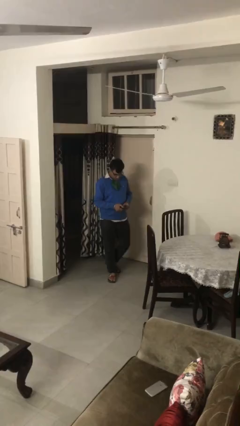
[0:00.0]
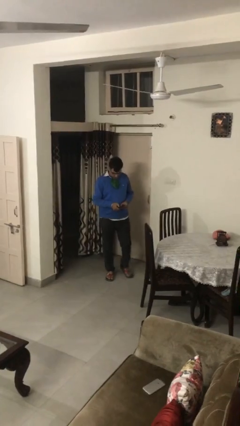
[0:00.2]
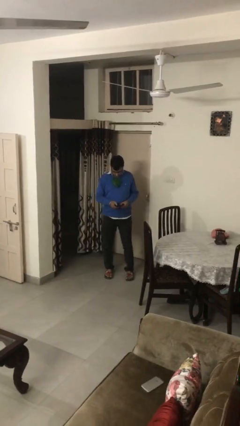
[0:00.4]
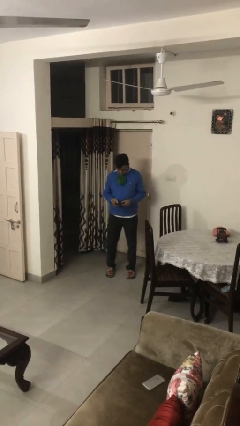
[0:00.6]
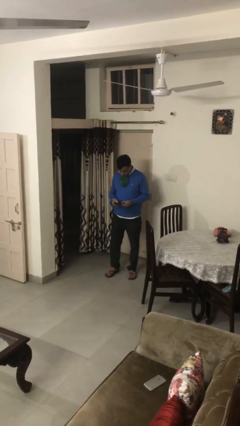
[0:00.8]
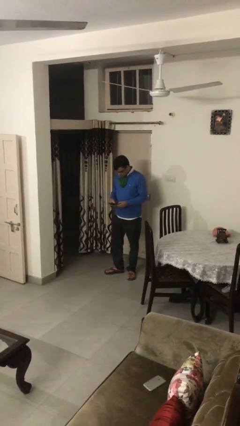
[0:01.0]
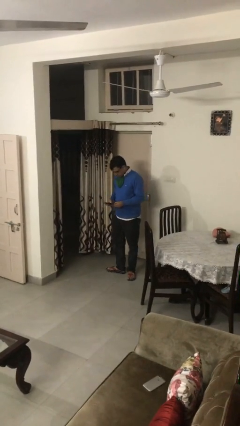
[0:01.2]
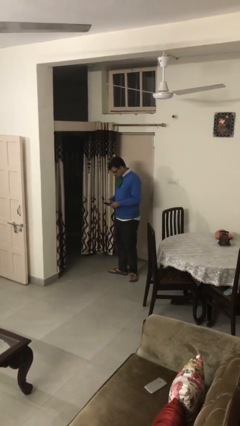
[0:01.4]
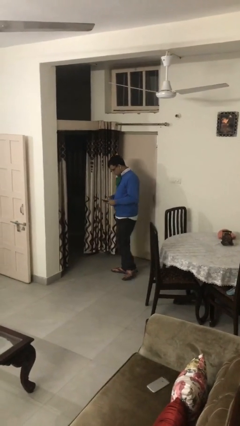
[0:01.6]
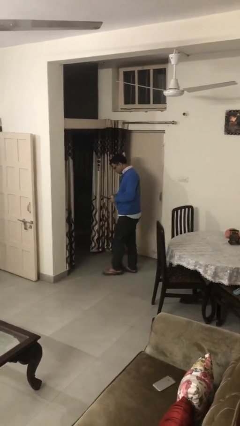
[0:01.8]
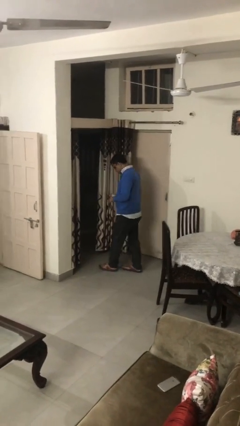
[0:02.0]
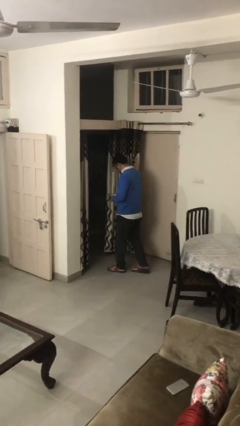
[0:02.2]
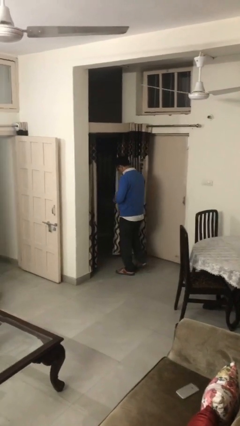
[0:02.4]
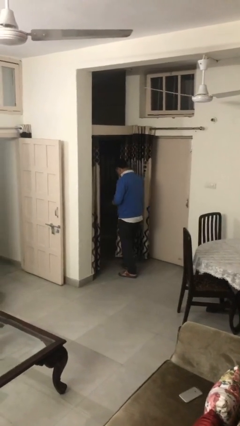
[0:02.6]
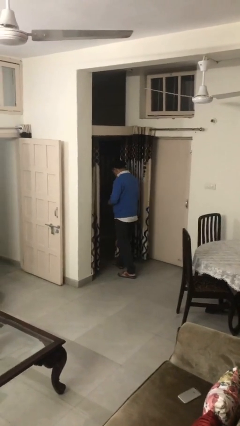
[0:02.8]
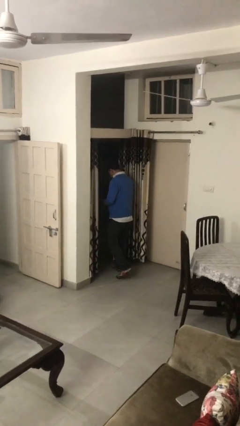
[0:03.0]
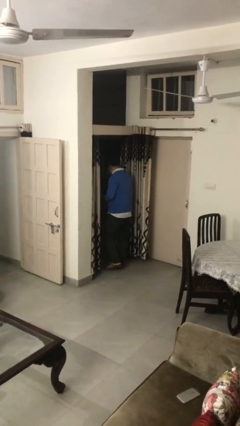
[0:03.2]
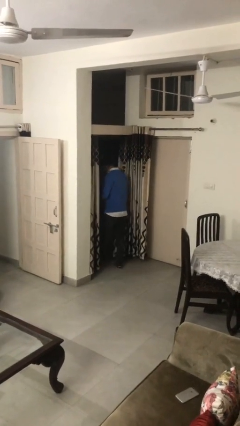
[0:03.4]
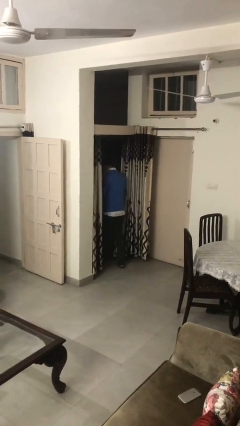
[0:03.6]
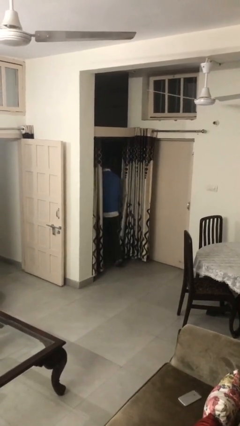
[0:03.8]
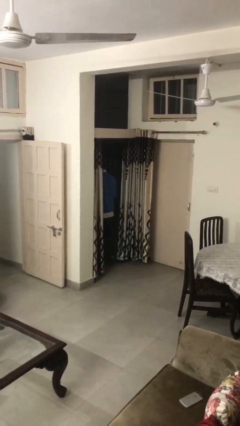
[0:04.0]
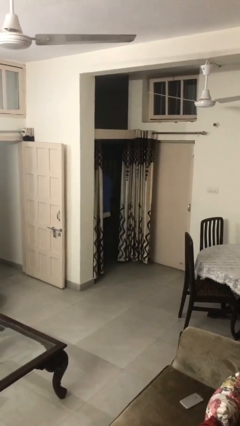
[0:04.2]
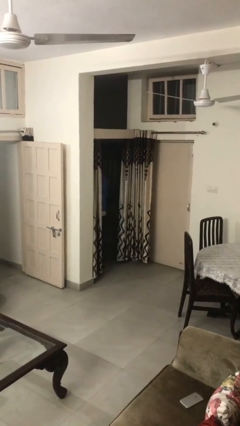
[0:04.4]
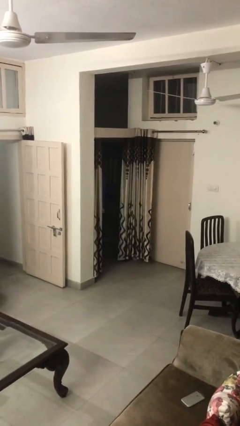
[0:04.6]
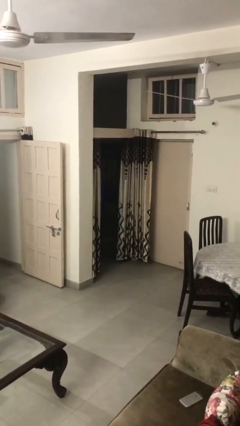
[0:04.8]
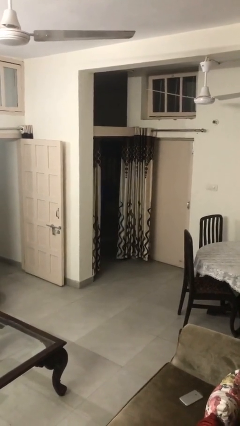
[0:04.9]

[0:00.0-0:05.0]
person exits scene through structure

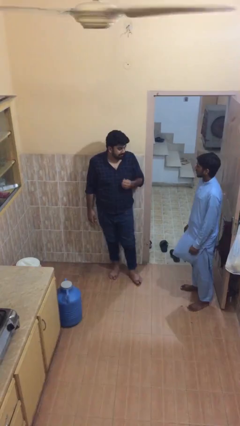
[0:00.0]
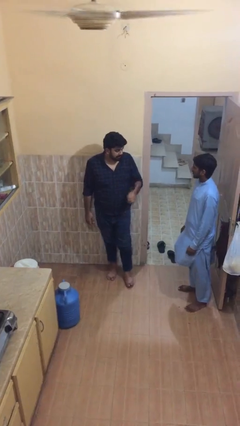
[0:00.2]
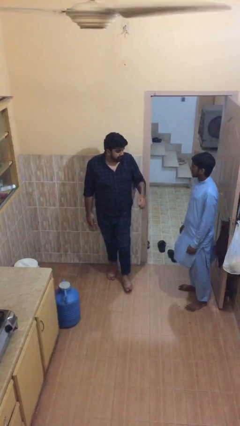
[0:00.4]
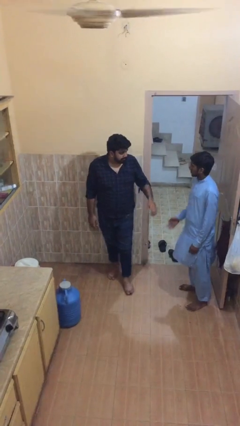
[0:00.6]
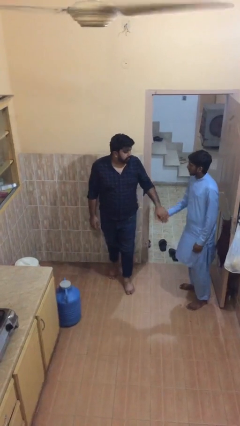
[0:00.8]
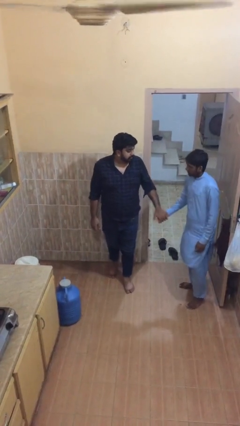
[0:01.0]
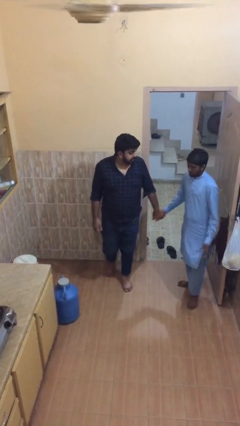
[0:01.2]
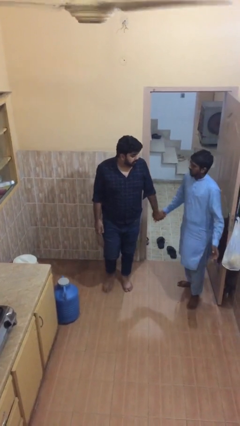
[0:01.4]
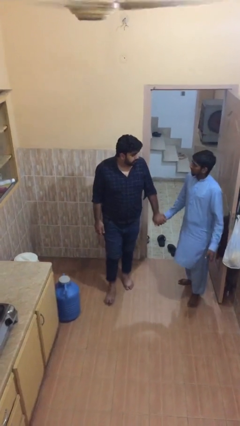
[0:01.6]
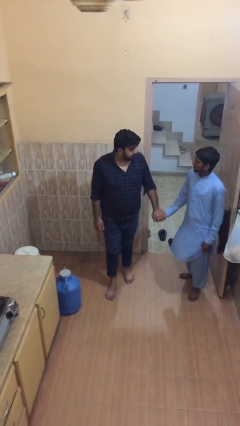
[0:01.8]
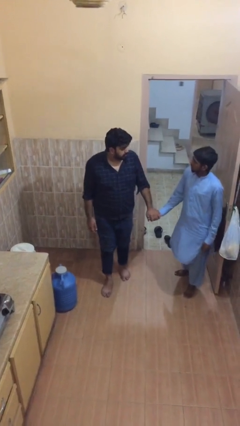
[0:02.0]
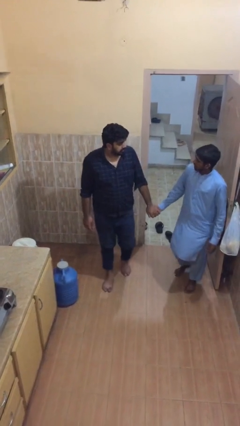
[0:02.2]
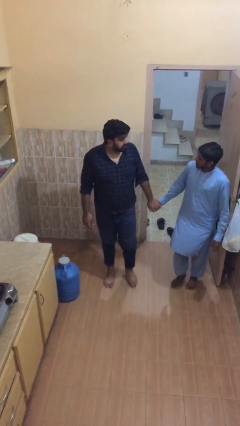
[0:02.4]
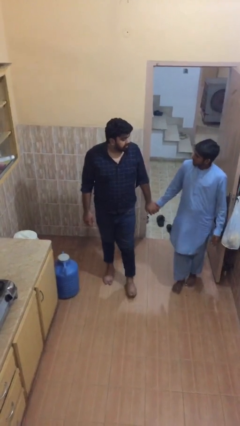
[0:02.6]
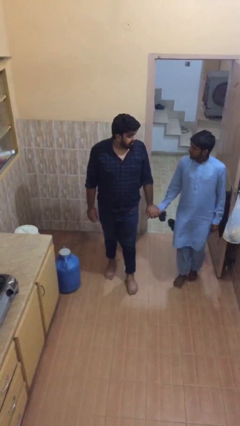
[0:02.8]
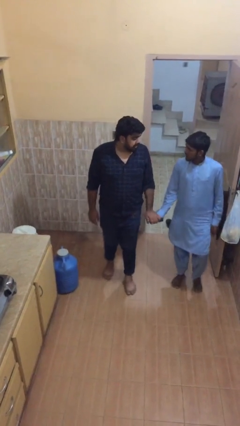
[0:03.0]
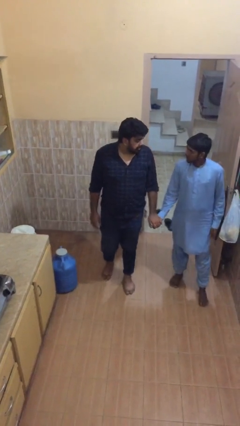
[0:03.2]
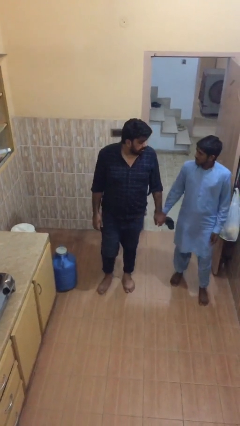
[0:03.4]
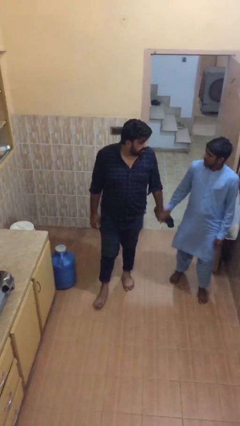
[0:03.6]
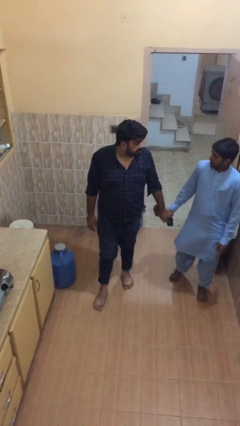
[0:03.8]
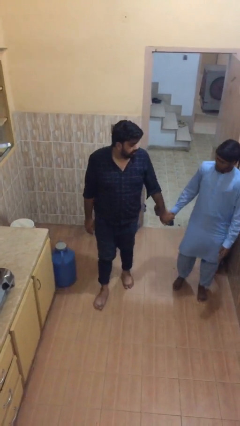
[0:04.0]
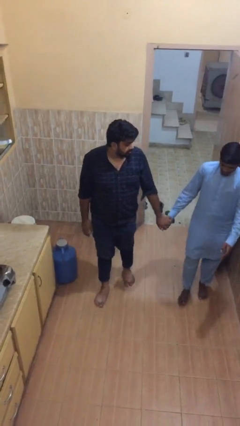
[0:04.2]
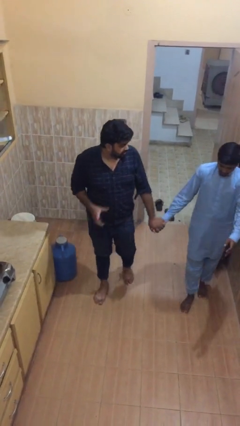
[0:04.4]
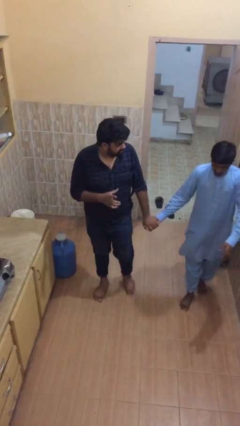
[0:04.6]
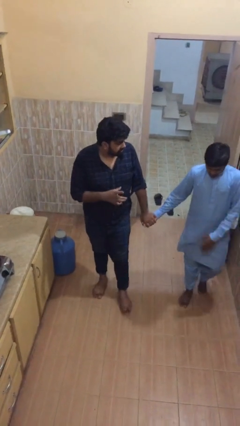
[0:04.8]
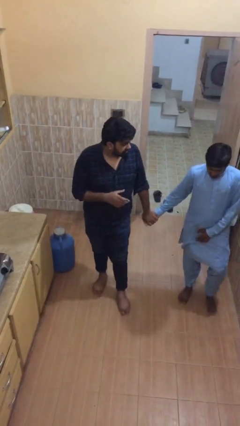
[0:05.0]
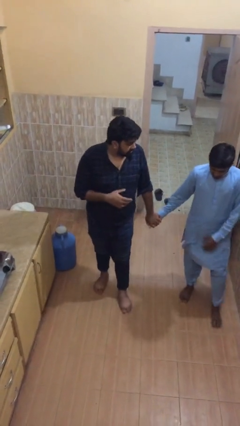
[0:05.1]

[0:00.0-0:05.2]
person holds hand

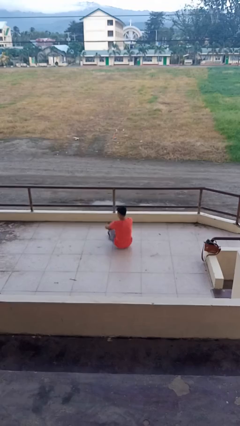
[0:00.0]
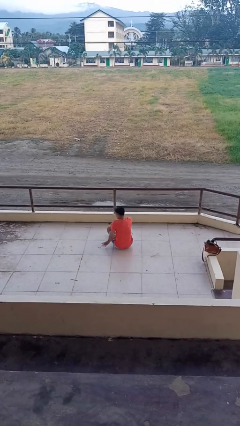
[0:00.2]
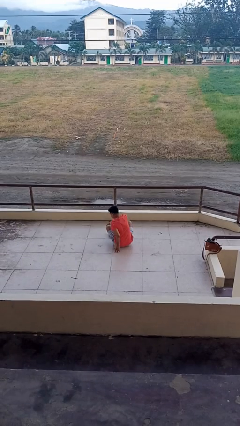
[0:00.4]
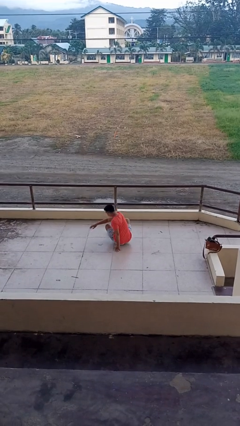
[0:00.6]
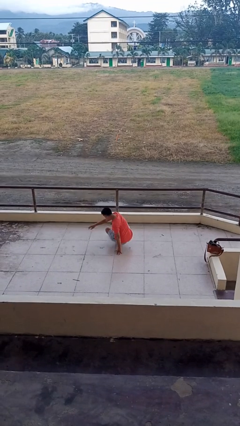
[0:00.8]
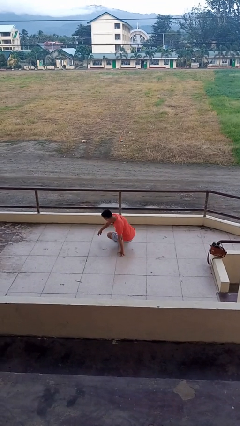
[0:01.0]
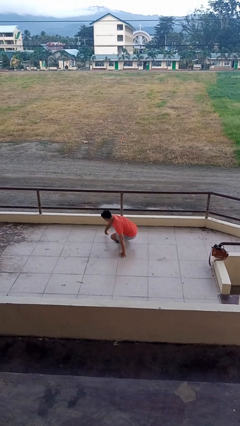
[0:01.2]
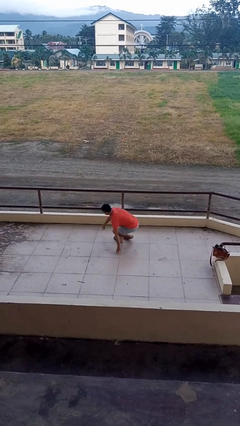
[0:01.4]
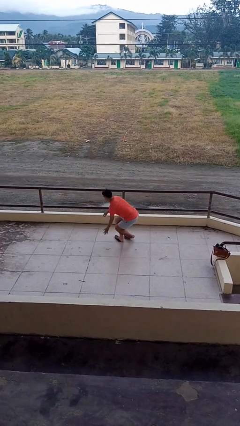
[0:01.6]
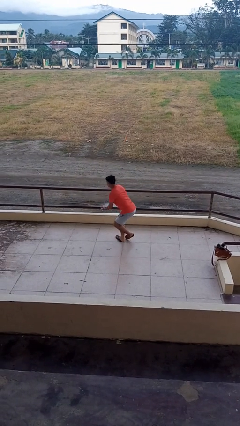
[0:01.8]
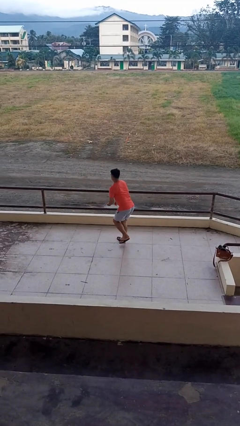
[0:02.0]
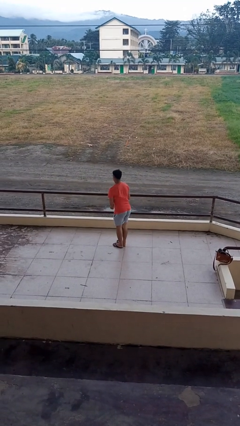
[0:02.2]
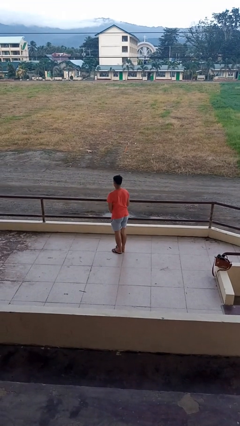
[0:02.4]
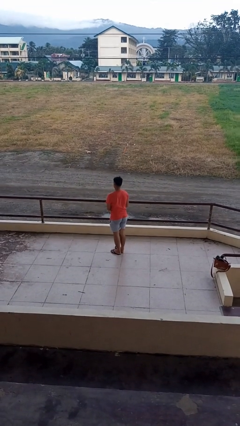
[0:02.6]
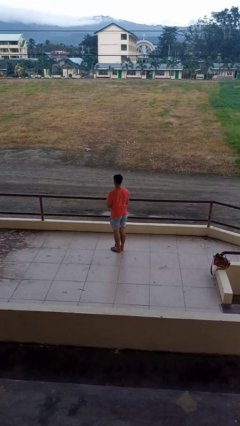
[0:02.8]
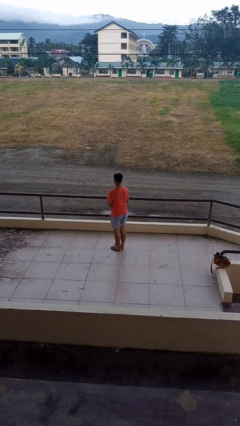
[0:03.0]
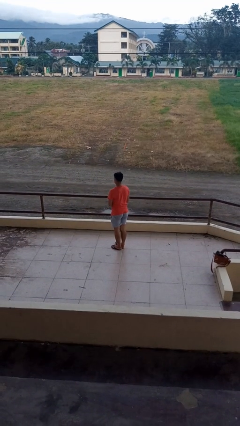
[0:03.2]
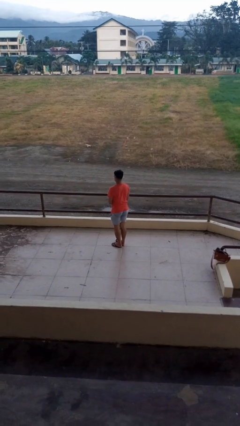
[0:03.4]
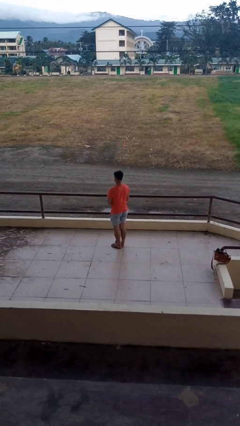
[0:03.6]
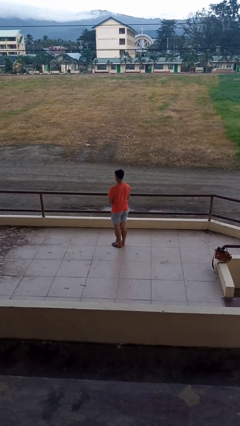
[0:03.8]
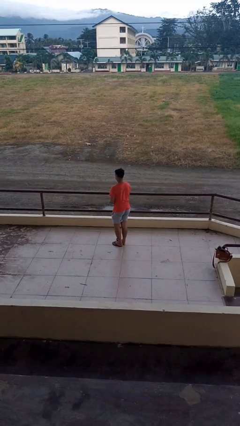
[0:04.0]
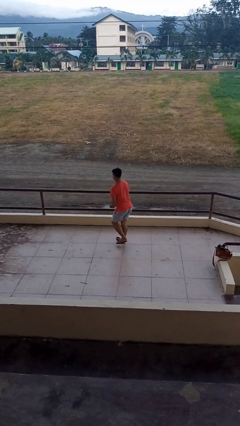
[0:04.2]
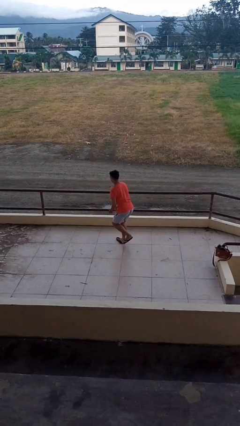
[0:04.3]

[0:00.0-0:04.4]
person stands up from floor

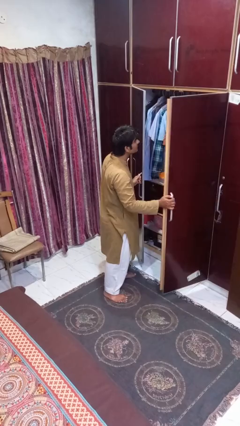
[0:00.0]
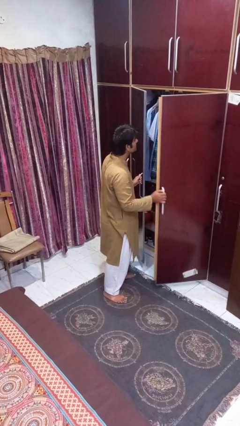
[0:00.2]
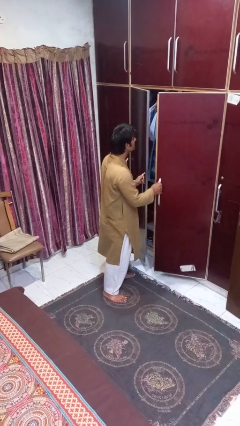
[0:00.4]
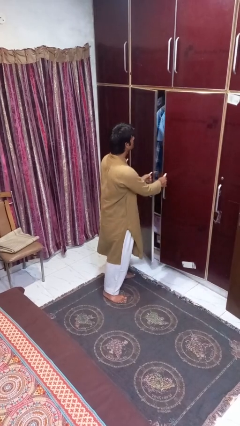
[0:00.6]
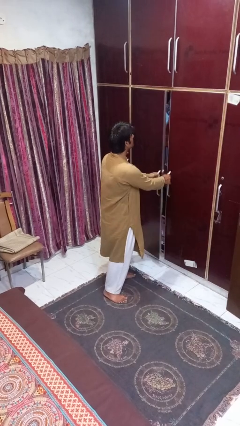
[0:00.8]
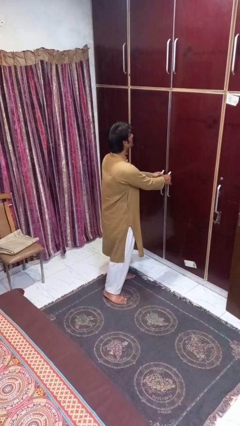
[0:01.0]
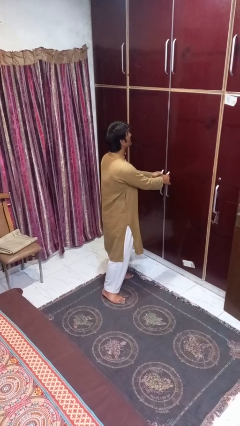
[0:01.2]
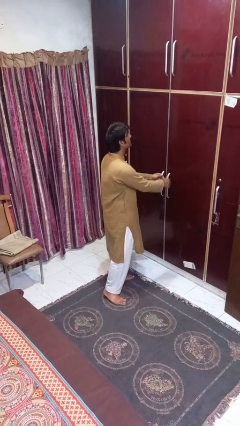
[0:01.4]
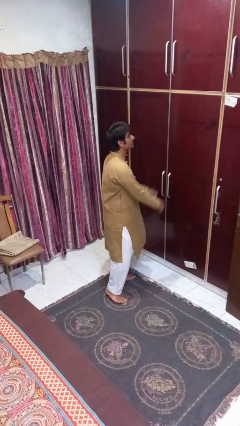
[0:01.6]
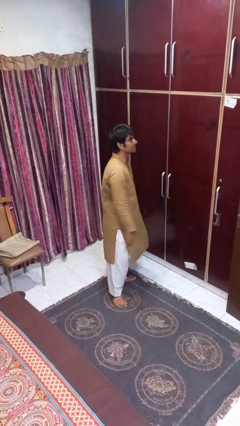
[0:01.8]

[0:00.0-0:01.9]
person closes closet door

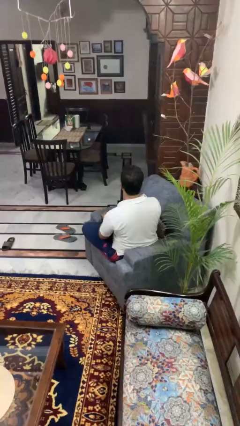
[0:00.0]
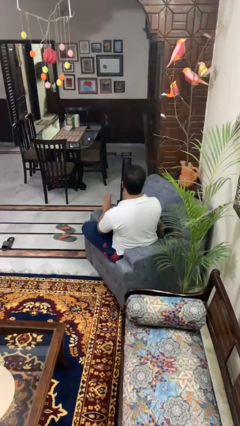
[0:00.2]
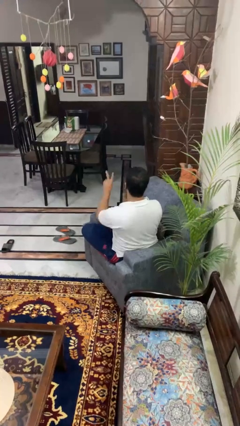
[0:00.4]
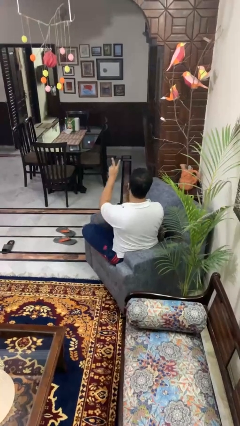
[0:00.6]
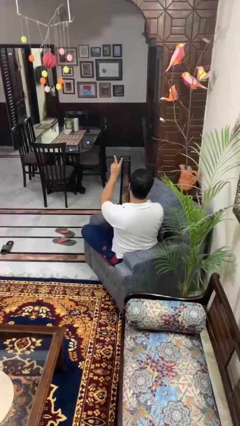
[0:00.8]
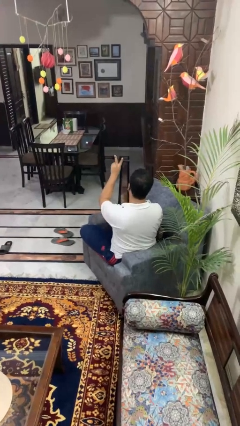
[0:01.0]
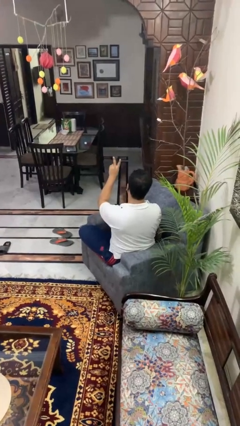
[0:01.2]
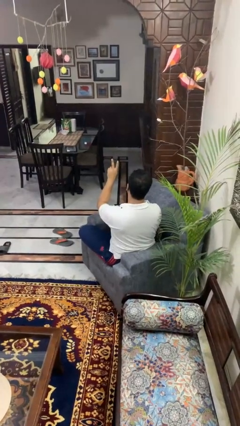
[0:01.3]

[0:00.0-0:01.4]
person gestures peace
